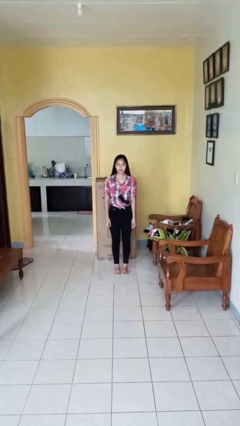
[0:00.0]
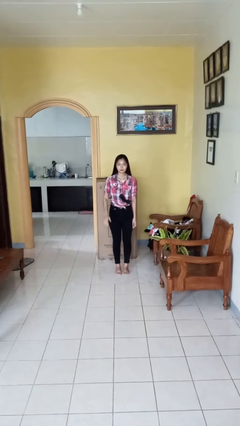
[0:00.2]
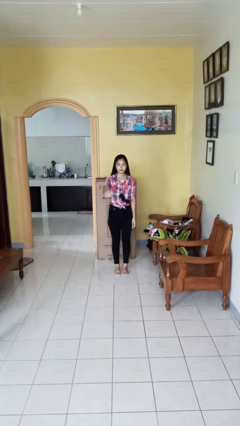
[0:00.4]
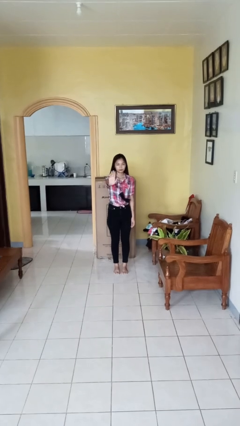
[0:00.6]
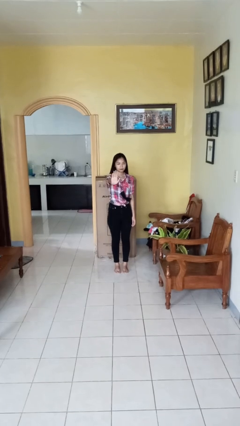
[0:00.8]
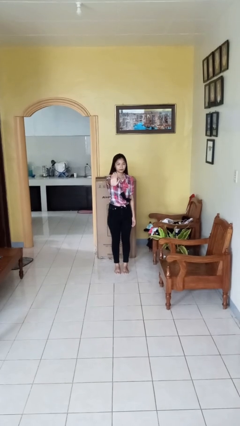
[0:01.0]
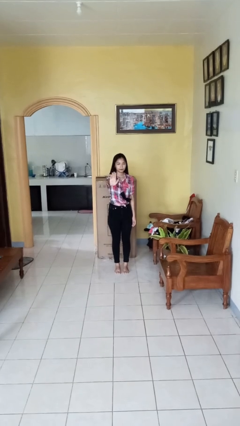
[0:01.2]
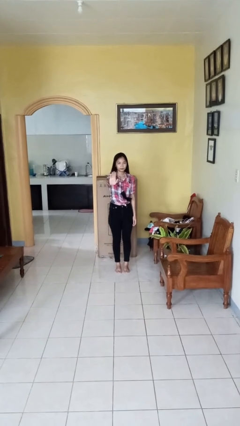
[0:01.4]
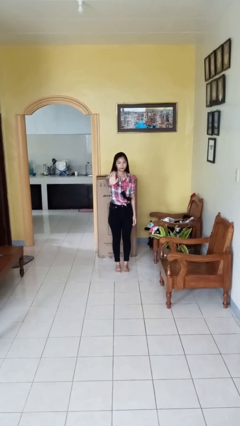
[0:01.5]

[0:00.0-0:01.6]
person gestures stop

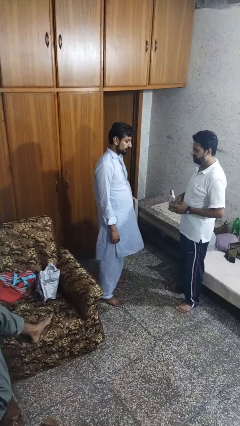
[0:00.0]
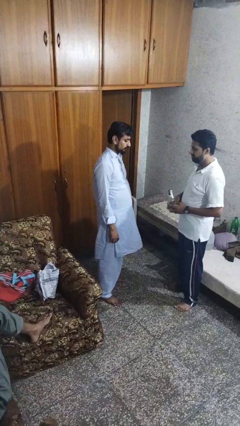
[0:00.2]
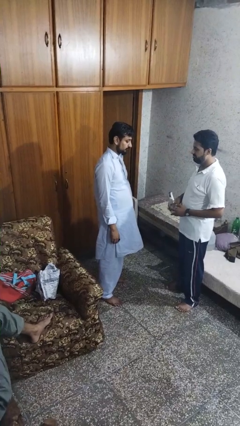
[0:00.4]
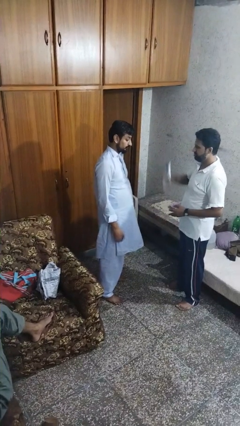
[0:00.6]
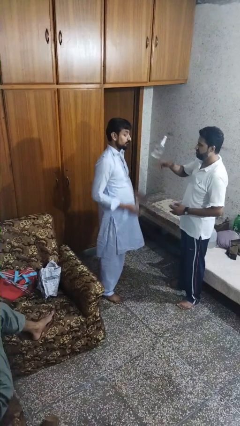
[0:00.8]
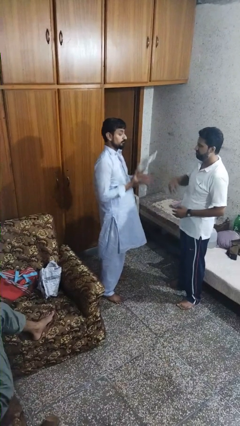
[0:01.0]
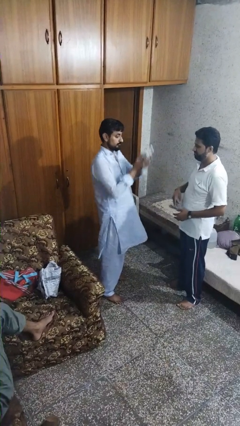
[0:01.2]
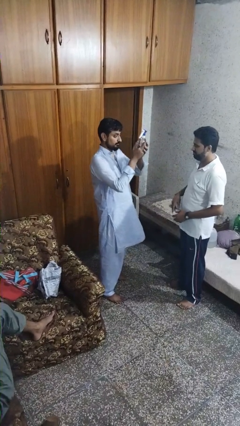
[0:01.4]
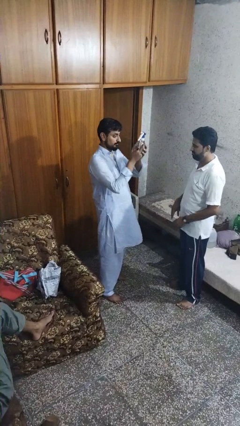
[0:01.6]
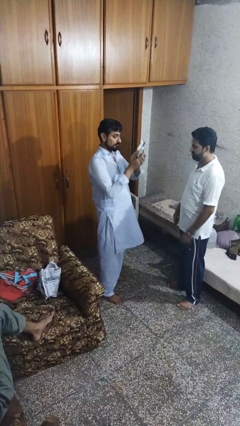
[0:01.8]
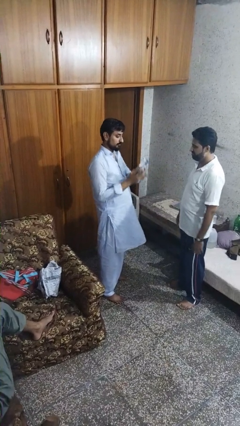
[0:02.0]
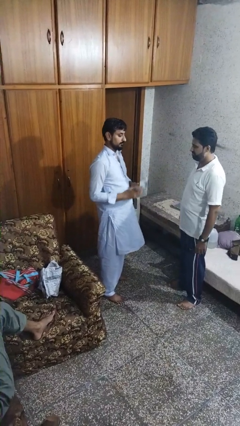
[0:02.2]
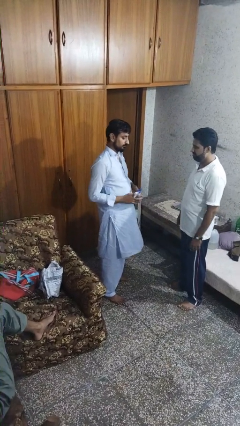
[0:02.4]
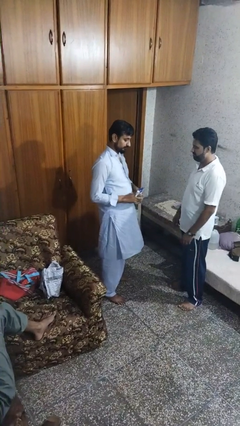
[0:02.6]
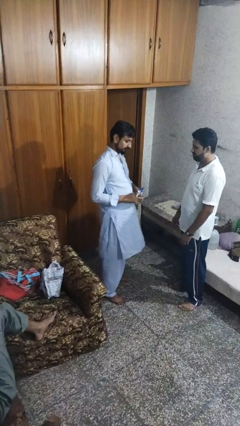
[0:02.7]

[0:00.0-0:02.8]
person catches object from person

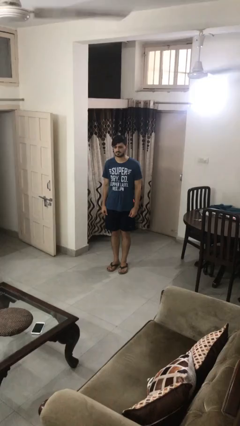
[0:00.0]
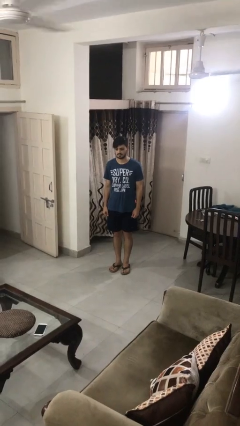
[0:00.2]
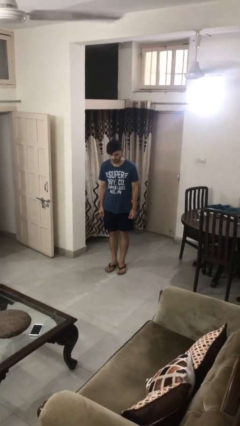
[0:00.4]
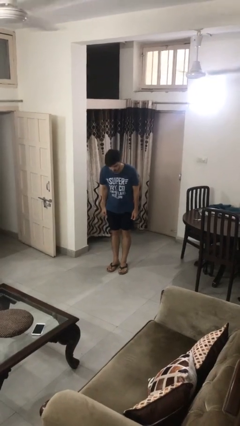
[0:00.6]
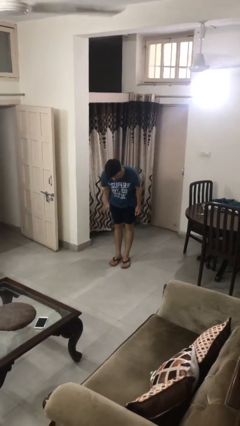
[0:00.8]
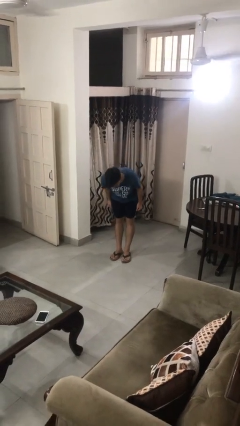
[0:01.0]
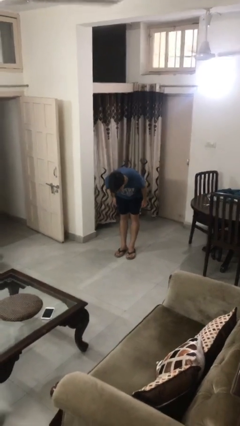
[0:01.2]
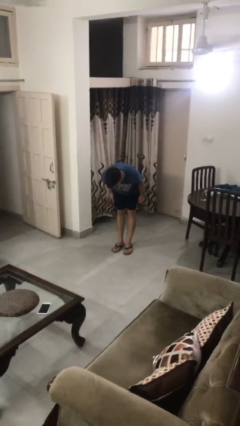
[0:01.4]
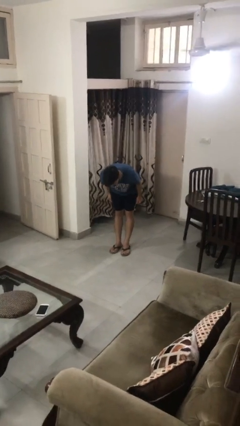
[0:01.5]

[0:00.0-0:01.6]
person bows

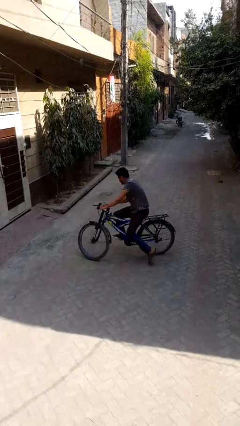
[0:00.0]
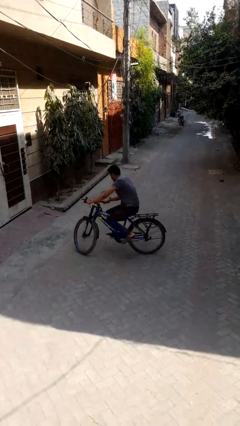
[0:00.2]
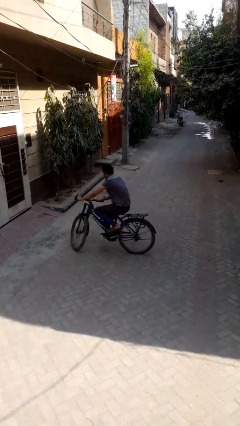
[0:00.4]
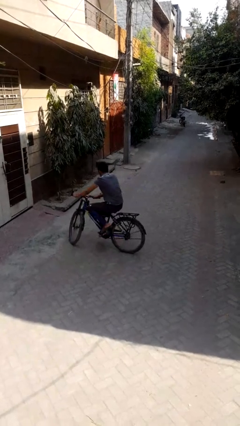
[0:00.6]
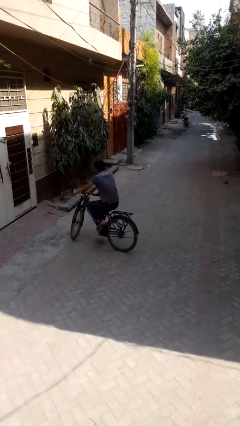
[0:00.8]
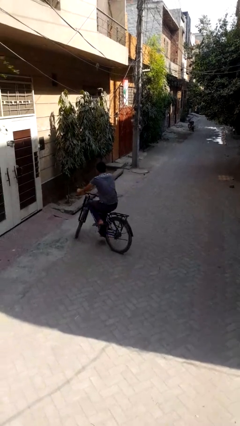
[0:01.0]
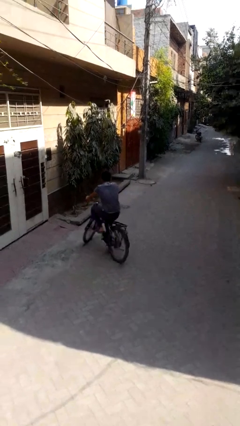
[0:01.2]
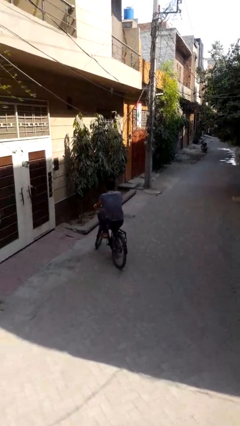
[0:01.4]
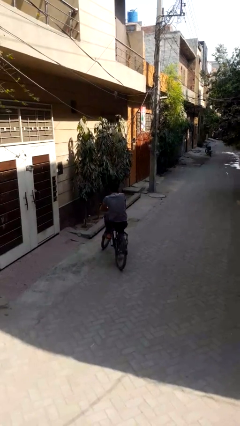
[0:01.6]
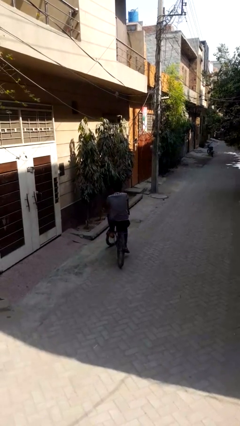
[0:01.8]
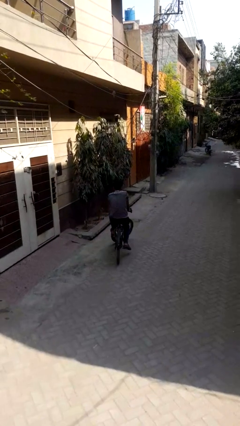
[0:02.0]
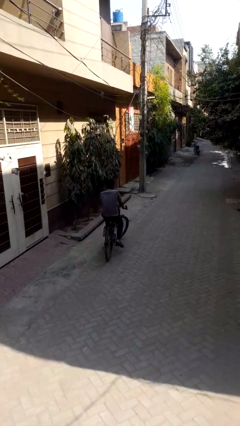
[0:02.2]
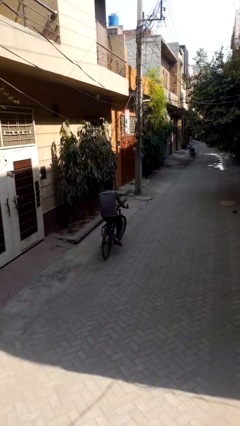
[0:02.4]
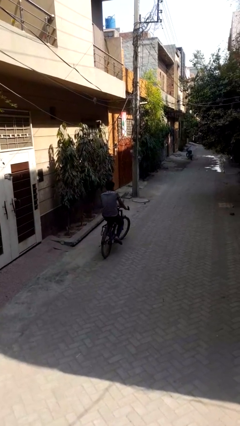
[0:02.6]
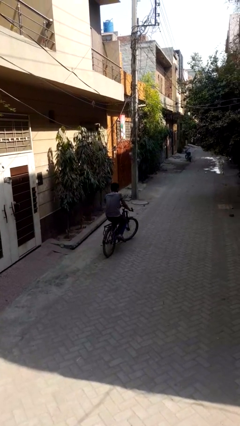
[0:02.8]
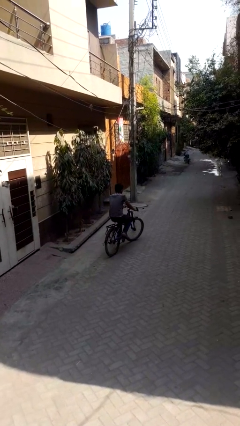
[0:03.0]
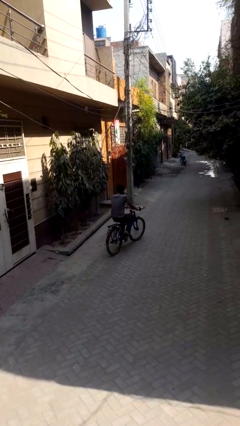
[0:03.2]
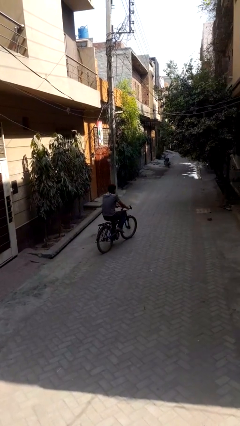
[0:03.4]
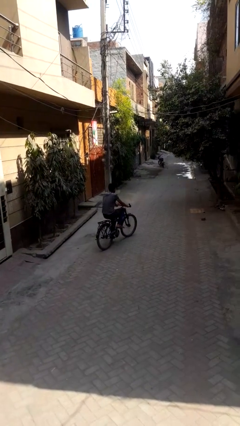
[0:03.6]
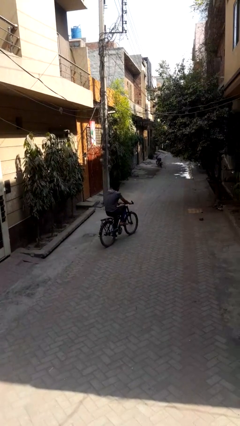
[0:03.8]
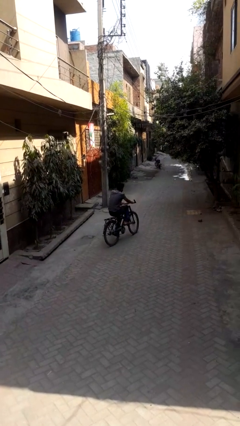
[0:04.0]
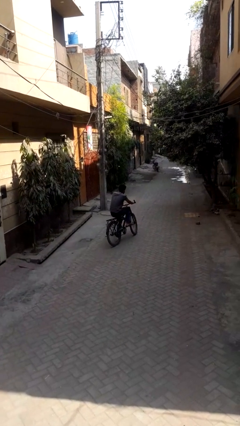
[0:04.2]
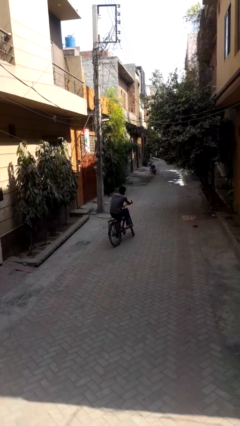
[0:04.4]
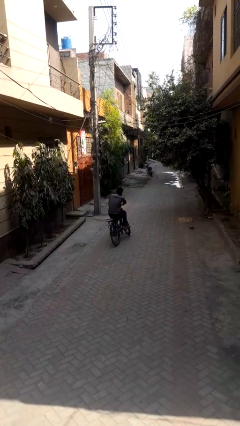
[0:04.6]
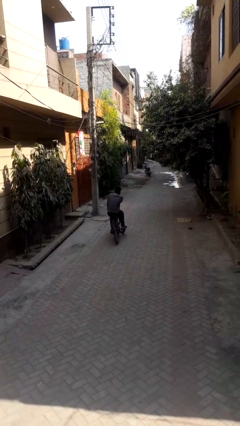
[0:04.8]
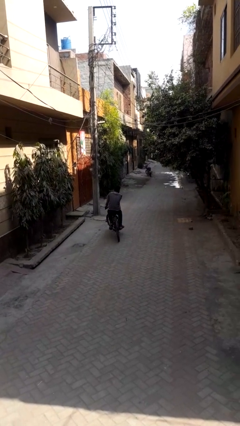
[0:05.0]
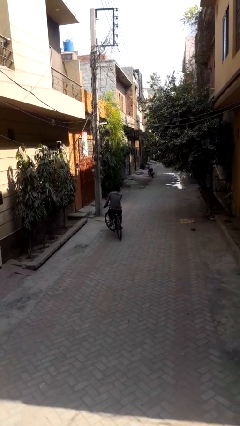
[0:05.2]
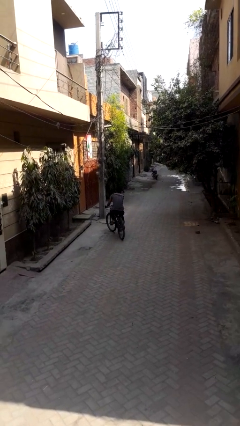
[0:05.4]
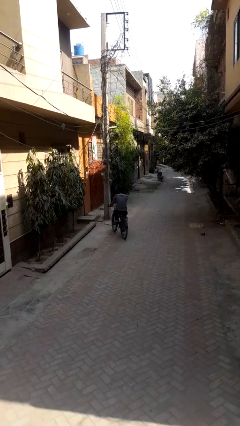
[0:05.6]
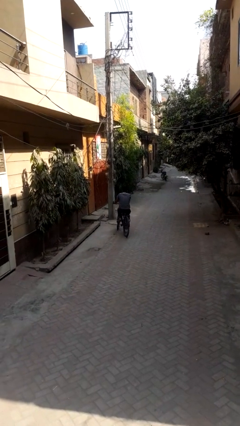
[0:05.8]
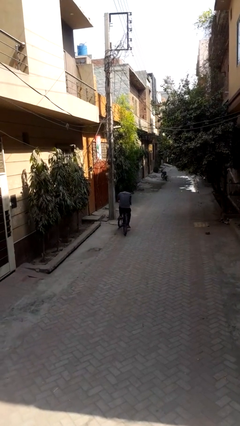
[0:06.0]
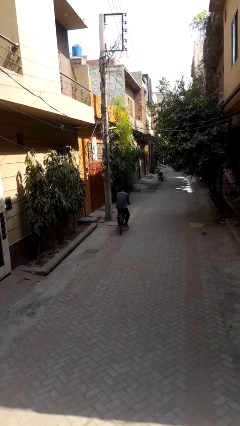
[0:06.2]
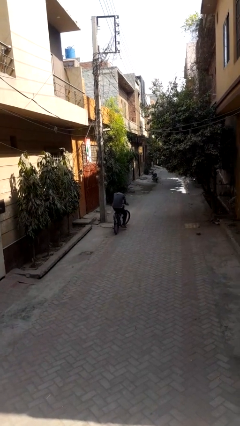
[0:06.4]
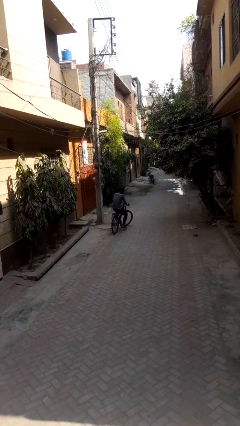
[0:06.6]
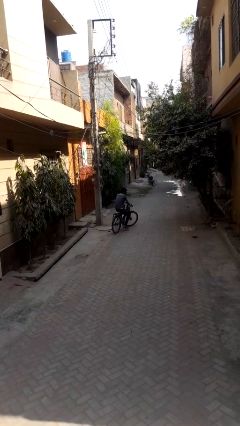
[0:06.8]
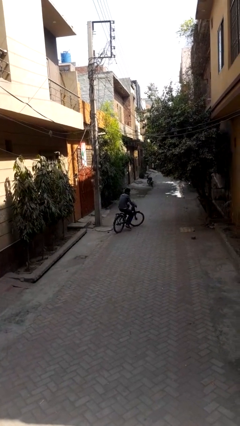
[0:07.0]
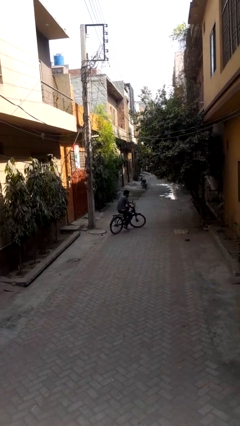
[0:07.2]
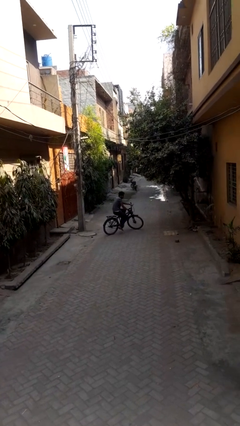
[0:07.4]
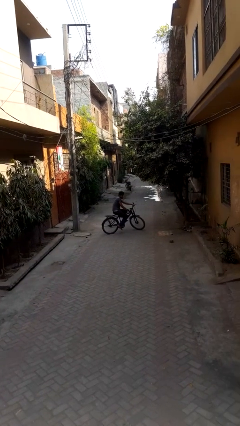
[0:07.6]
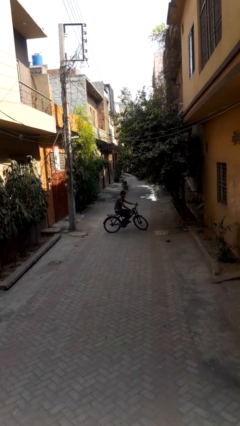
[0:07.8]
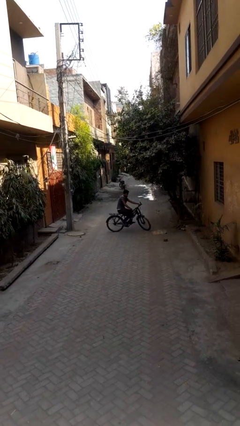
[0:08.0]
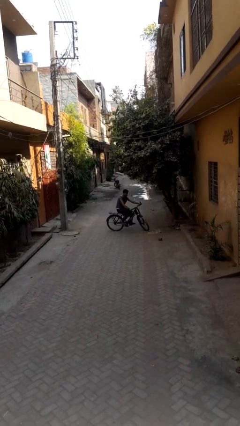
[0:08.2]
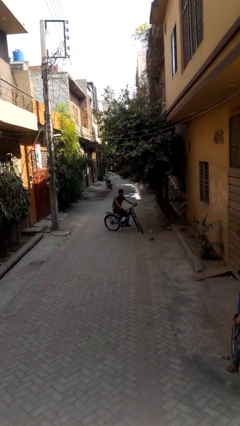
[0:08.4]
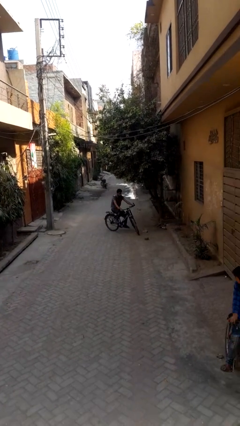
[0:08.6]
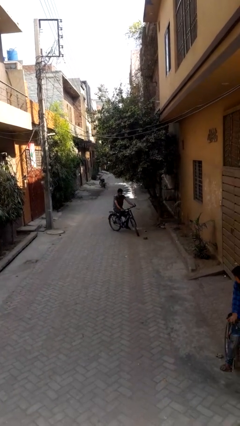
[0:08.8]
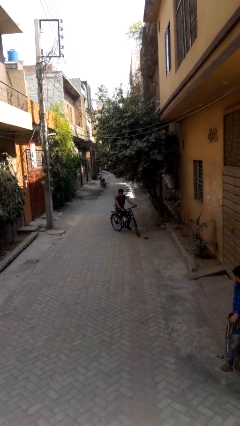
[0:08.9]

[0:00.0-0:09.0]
person rides bicycle

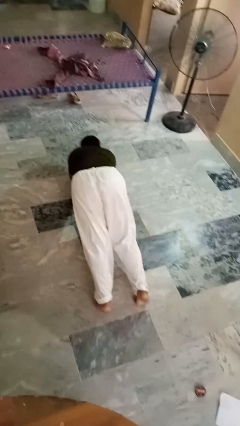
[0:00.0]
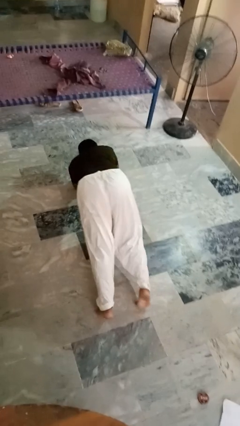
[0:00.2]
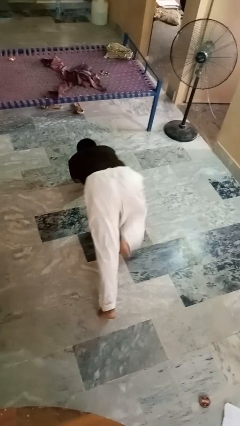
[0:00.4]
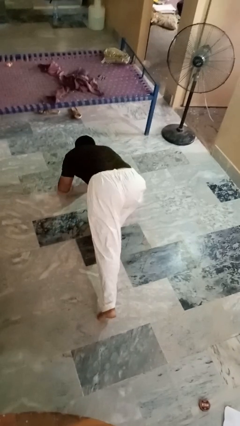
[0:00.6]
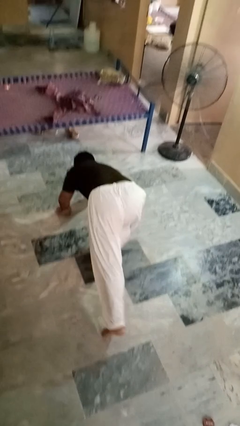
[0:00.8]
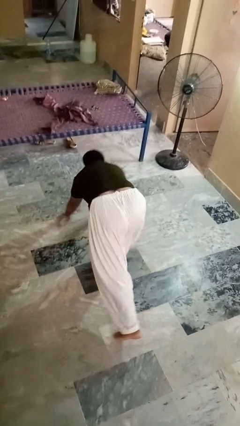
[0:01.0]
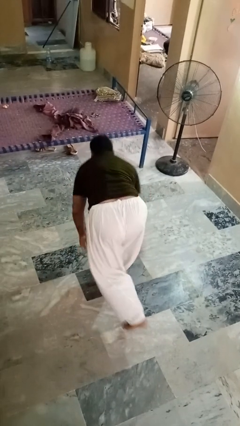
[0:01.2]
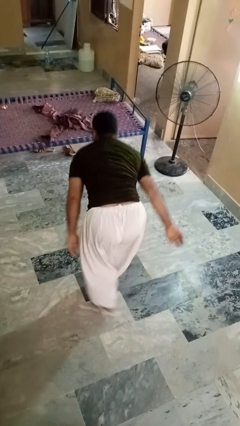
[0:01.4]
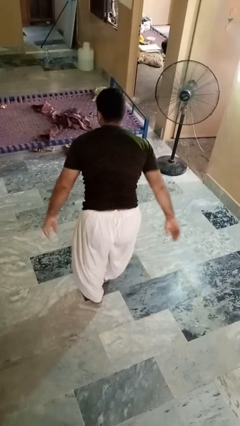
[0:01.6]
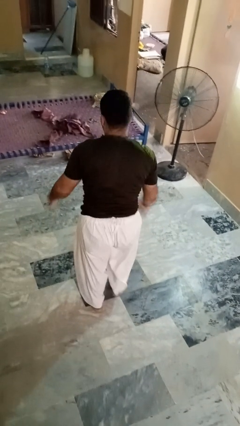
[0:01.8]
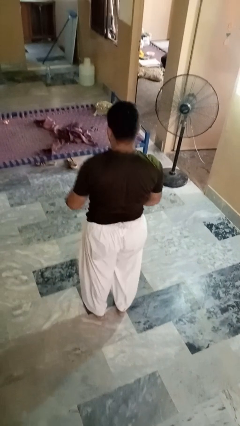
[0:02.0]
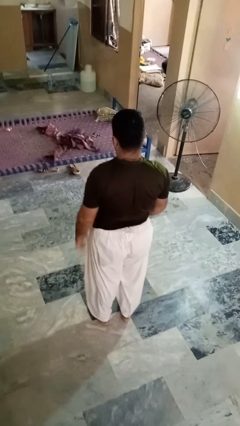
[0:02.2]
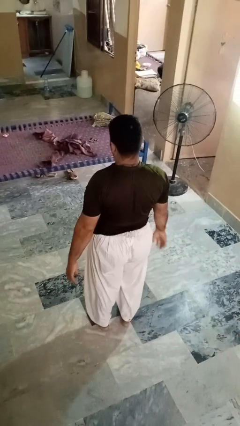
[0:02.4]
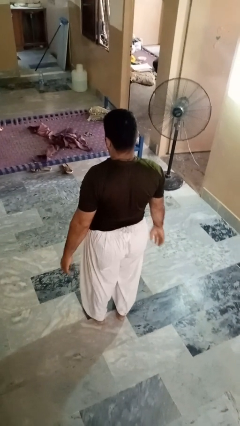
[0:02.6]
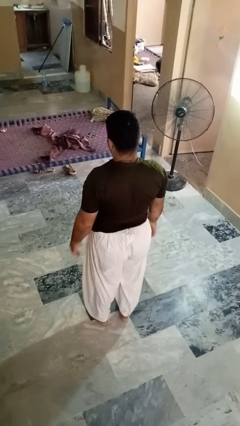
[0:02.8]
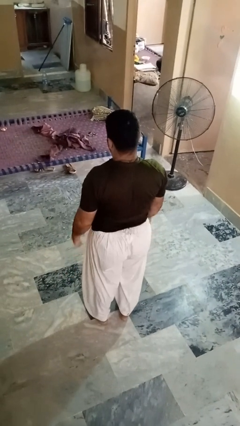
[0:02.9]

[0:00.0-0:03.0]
person stands up from floor
